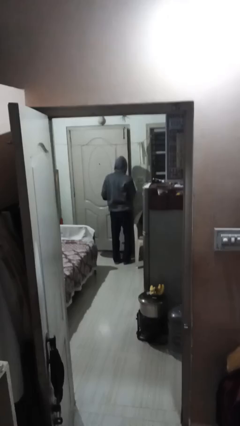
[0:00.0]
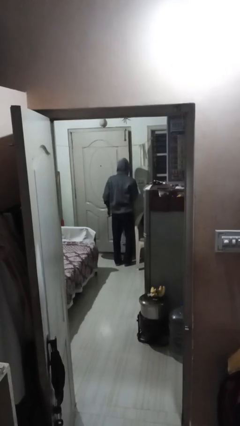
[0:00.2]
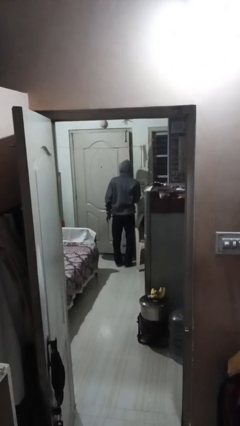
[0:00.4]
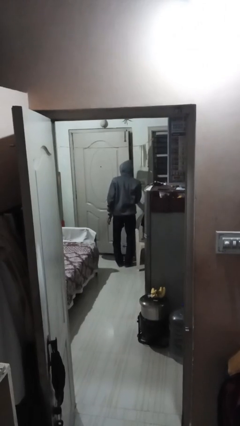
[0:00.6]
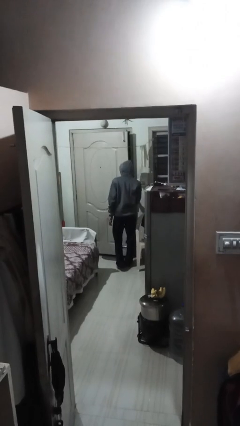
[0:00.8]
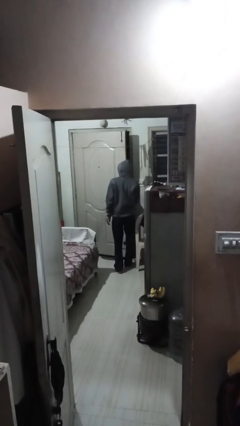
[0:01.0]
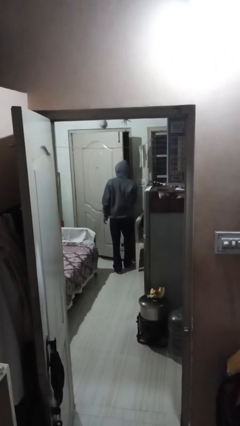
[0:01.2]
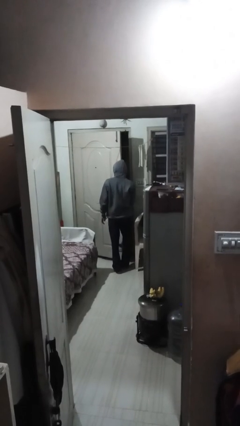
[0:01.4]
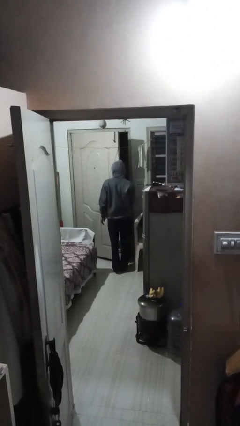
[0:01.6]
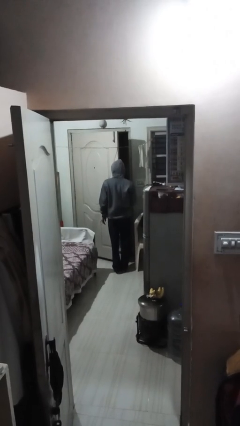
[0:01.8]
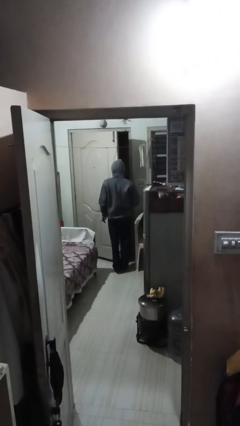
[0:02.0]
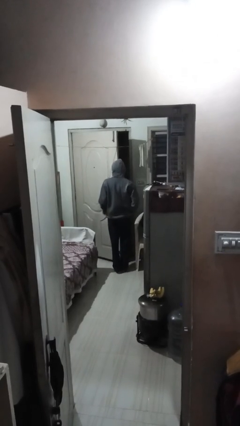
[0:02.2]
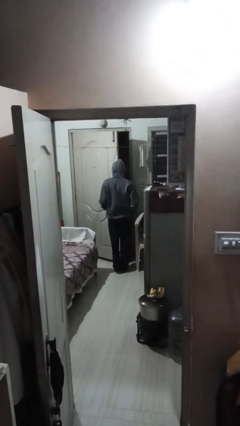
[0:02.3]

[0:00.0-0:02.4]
person opens facility door

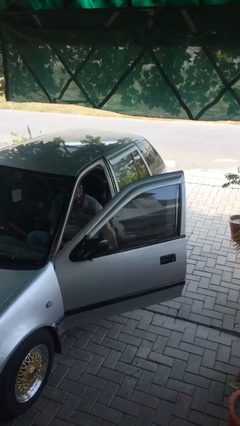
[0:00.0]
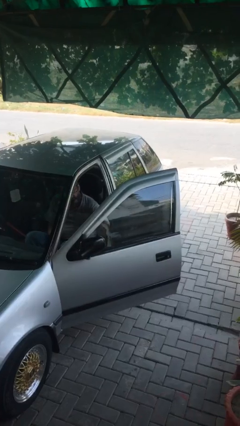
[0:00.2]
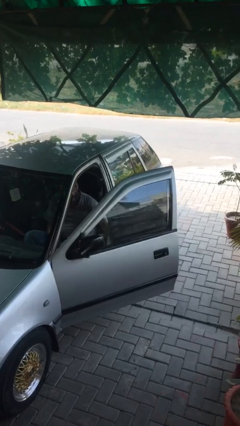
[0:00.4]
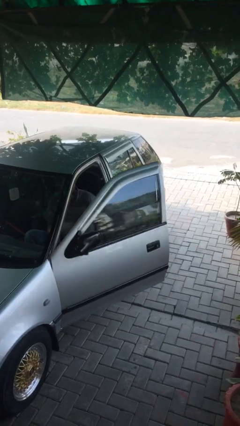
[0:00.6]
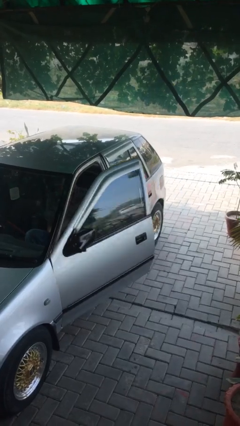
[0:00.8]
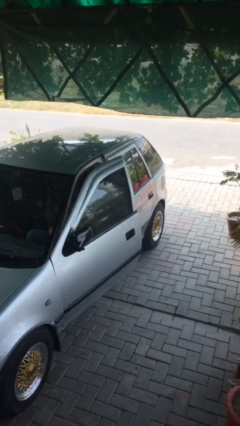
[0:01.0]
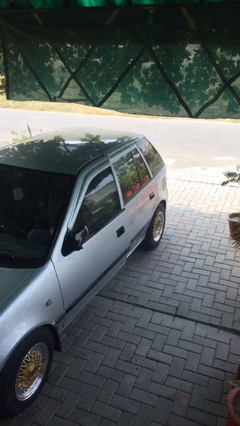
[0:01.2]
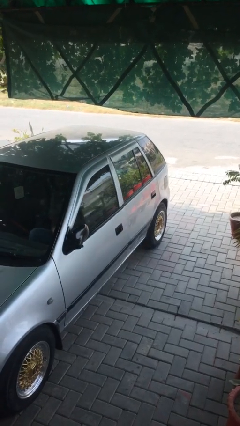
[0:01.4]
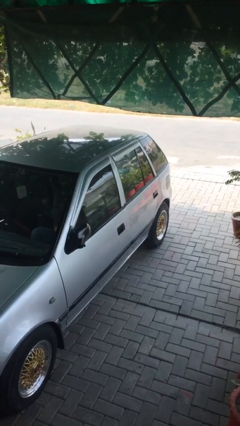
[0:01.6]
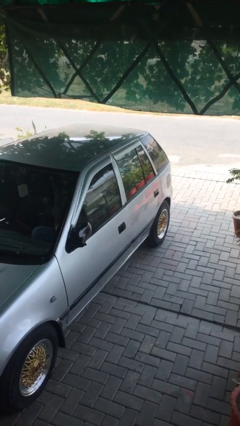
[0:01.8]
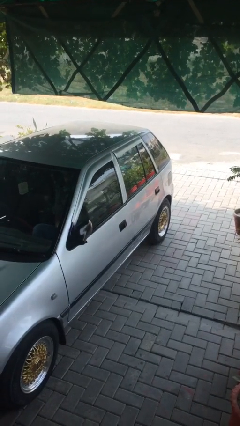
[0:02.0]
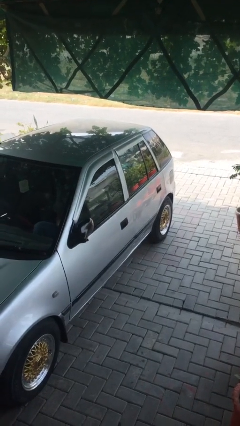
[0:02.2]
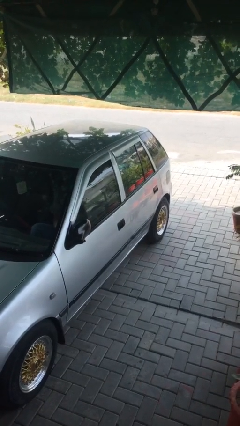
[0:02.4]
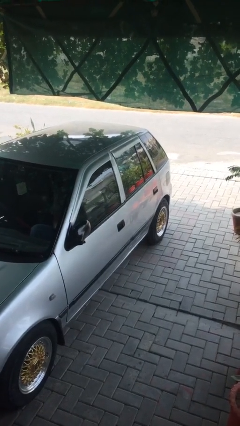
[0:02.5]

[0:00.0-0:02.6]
person closes car door

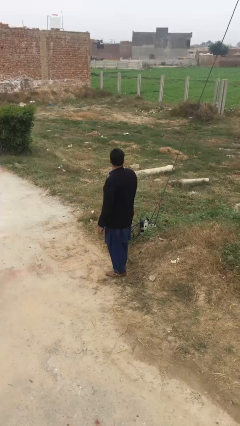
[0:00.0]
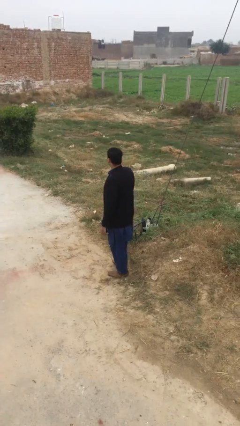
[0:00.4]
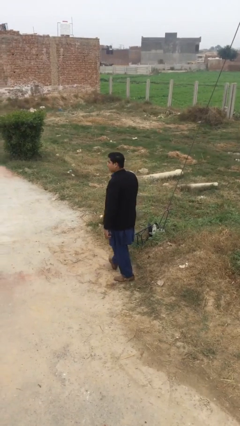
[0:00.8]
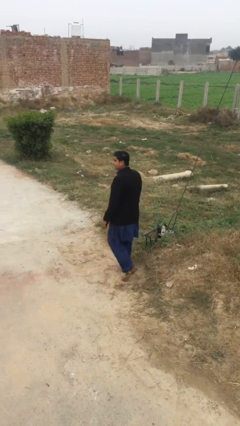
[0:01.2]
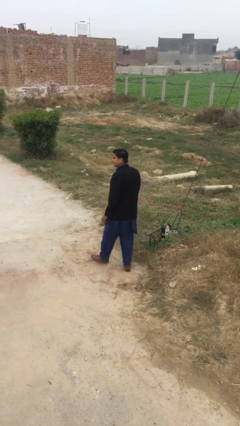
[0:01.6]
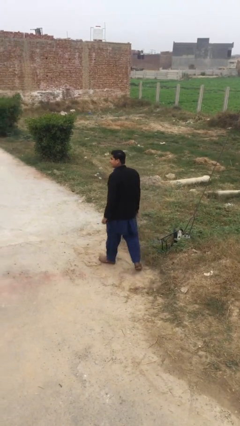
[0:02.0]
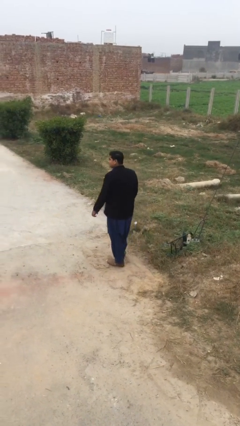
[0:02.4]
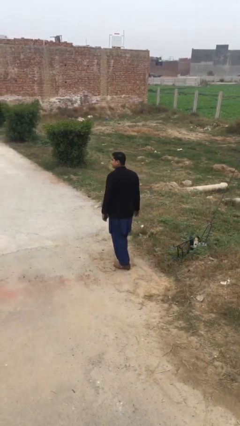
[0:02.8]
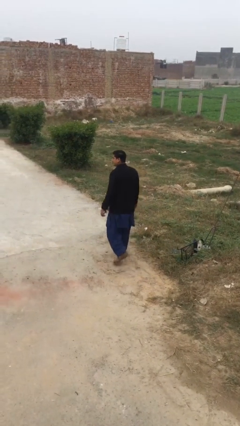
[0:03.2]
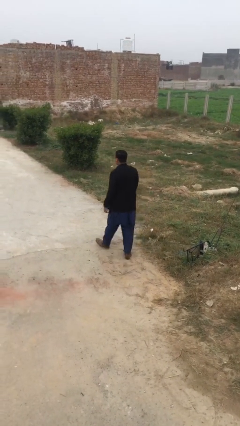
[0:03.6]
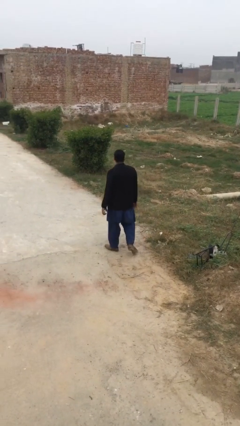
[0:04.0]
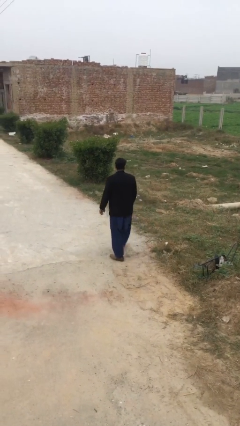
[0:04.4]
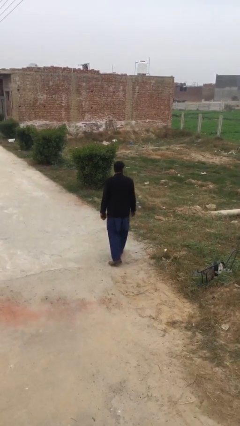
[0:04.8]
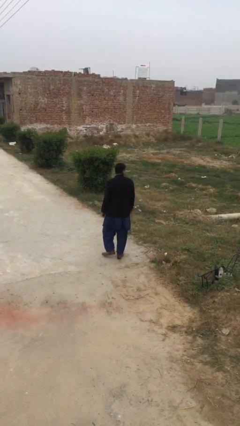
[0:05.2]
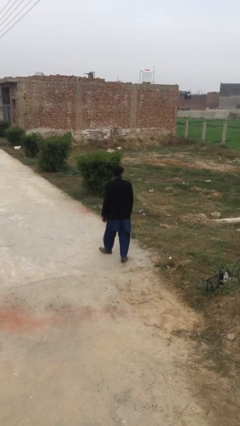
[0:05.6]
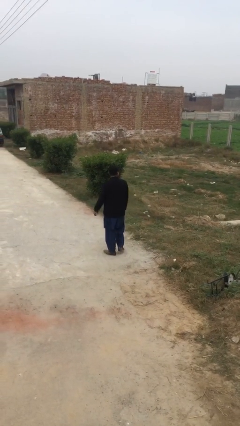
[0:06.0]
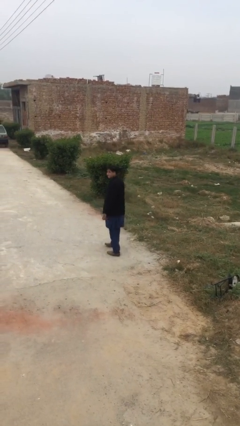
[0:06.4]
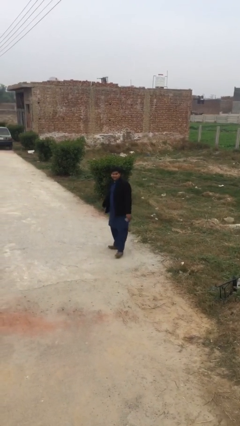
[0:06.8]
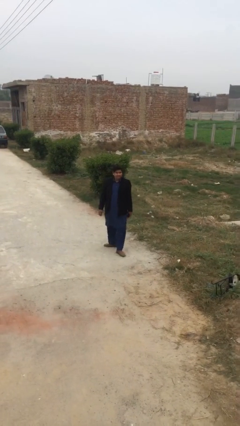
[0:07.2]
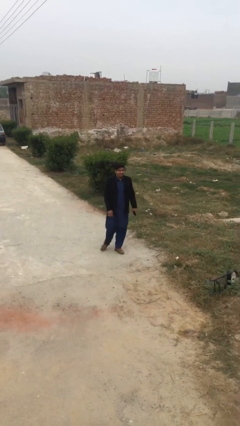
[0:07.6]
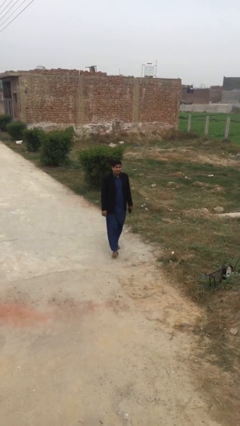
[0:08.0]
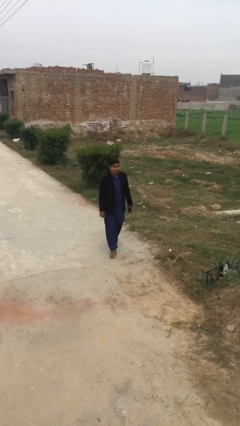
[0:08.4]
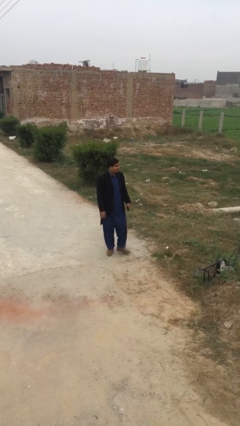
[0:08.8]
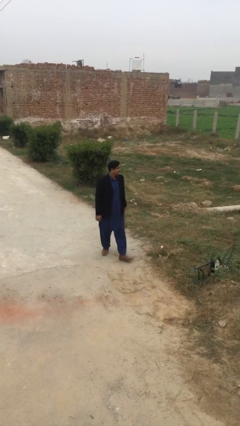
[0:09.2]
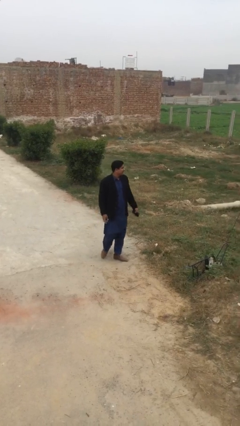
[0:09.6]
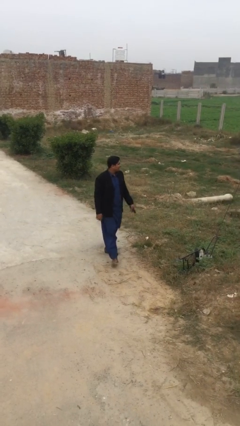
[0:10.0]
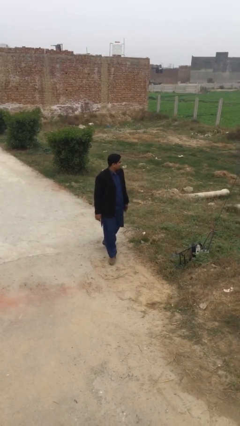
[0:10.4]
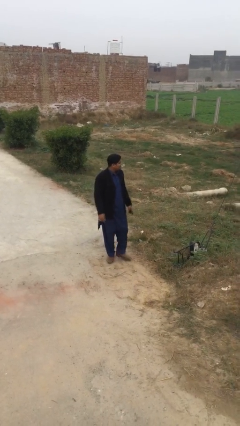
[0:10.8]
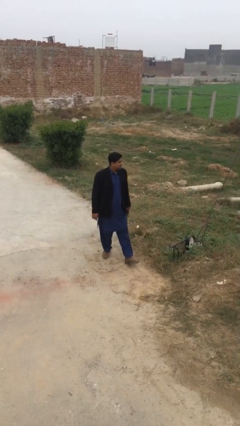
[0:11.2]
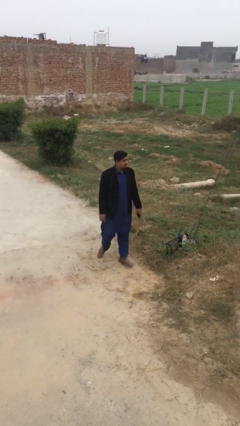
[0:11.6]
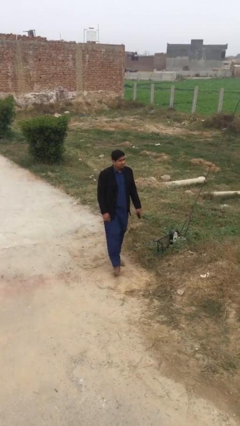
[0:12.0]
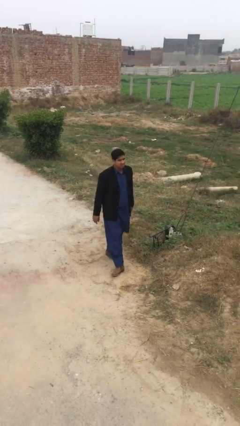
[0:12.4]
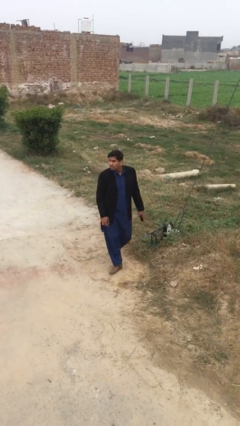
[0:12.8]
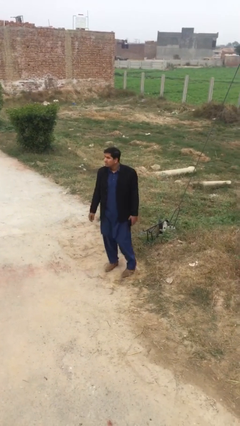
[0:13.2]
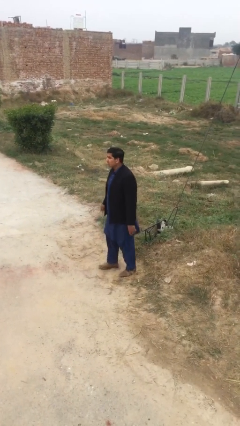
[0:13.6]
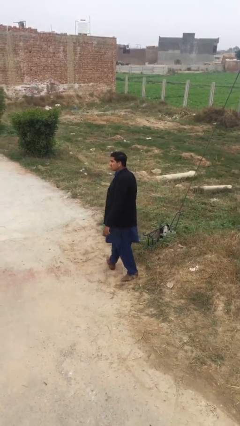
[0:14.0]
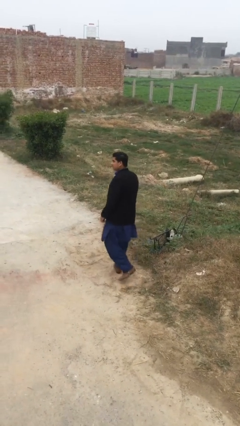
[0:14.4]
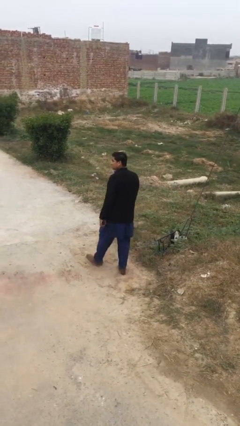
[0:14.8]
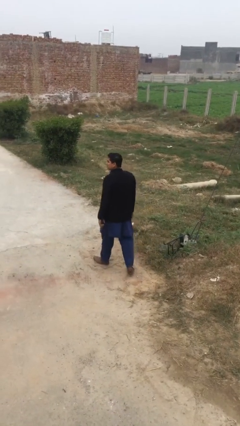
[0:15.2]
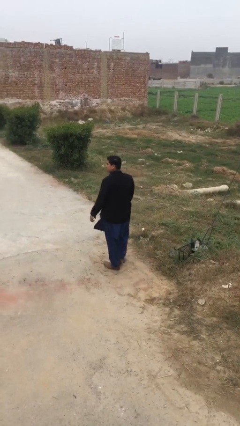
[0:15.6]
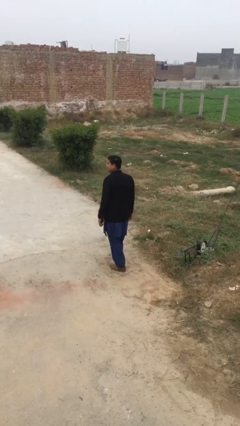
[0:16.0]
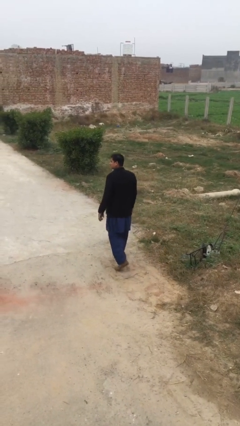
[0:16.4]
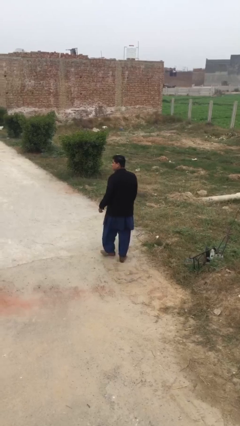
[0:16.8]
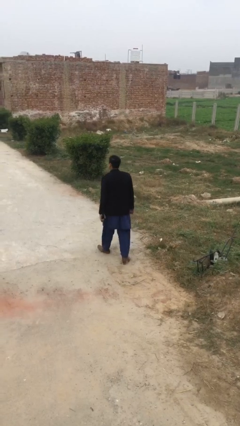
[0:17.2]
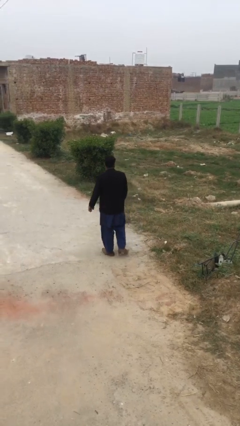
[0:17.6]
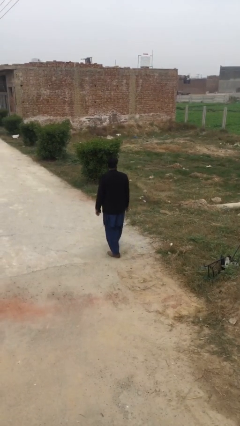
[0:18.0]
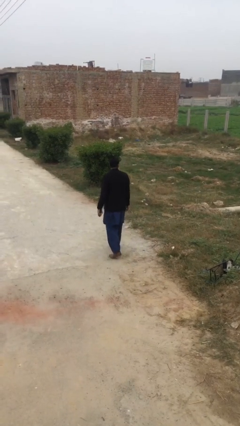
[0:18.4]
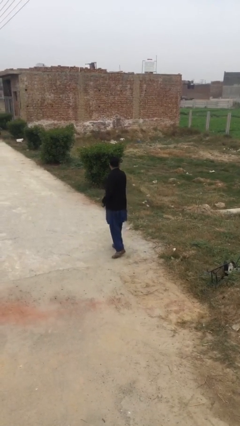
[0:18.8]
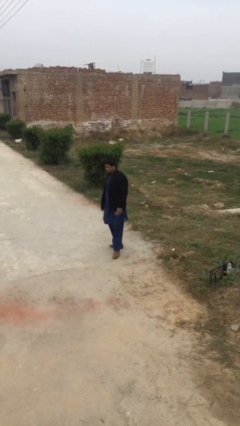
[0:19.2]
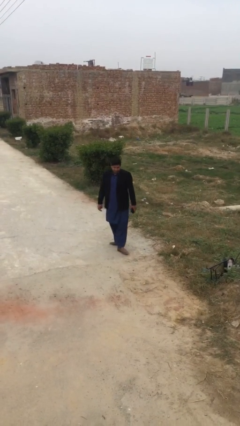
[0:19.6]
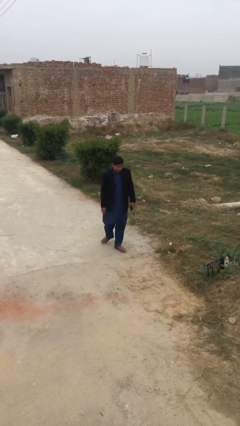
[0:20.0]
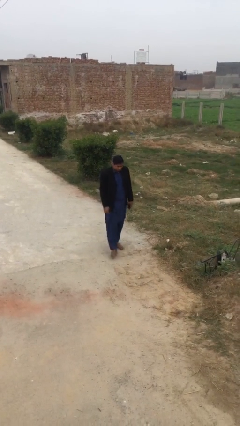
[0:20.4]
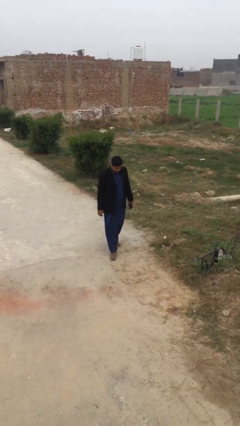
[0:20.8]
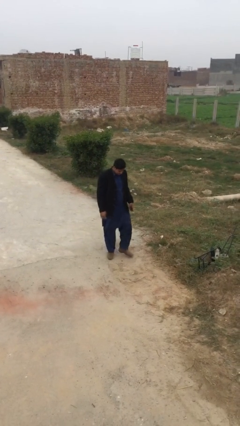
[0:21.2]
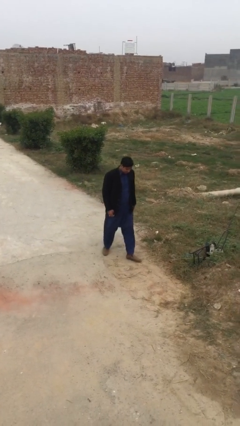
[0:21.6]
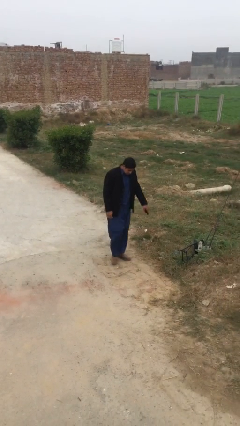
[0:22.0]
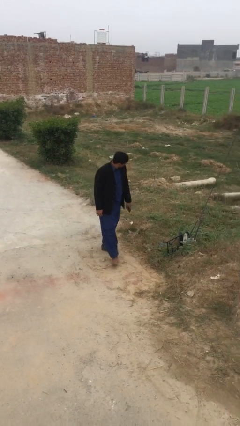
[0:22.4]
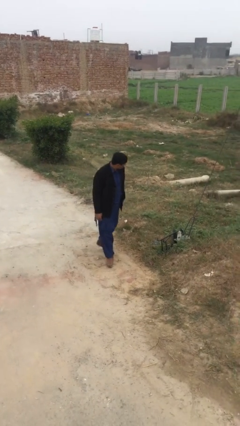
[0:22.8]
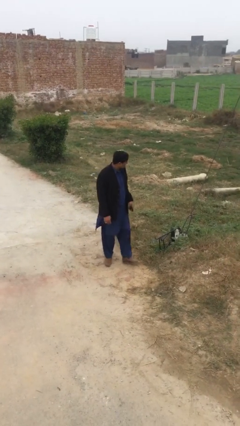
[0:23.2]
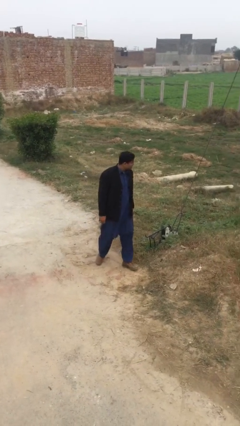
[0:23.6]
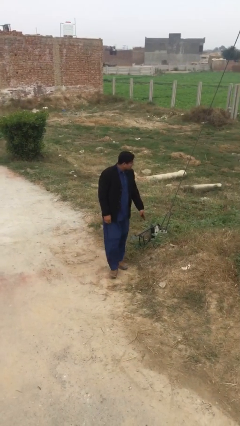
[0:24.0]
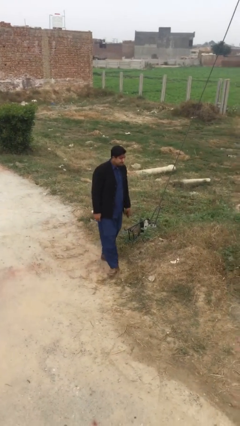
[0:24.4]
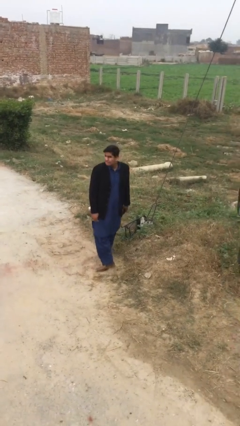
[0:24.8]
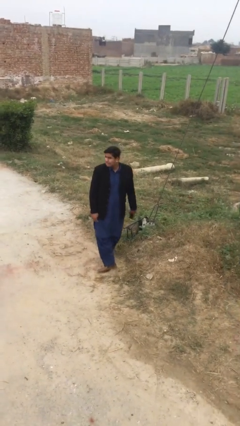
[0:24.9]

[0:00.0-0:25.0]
person walks

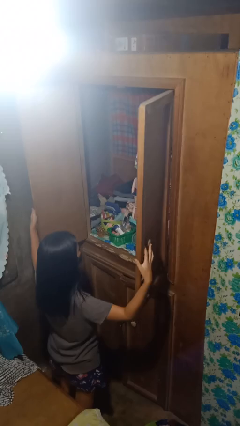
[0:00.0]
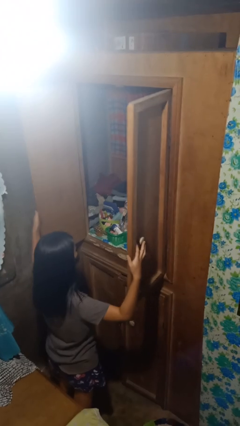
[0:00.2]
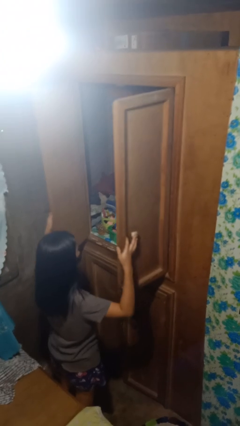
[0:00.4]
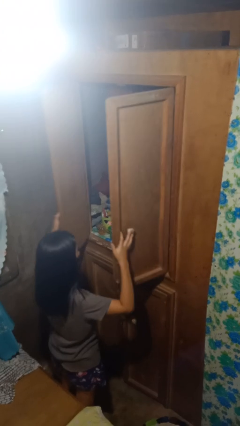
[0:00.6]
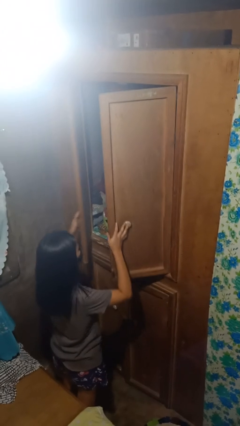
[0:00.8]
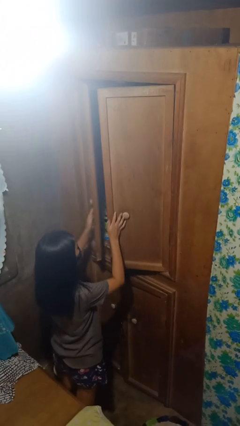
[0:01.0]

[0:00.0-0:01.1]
person closes closet door
